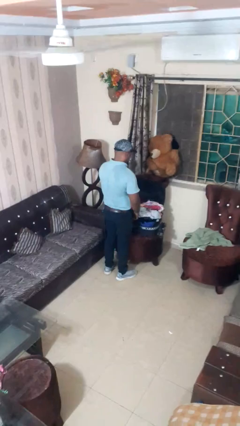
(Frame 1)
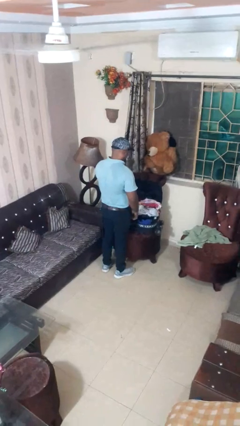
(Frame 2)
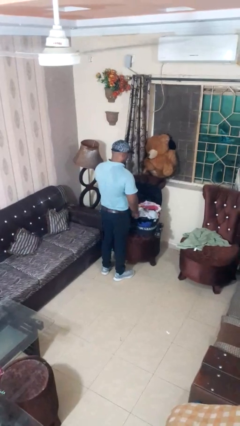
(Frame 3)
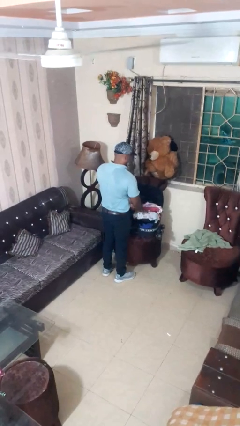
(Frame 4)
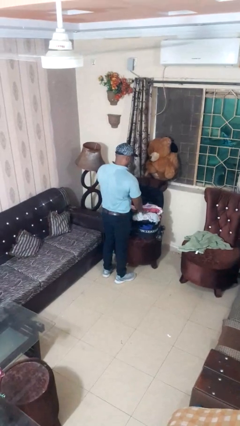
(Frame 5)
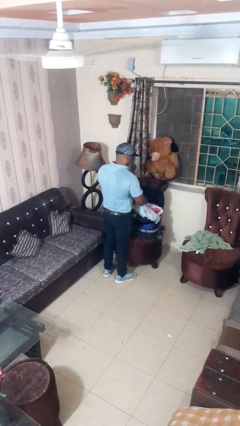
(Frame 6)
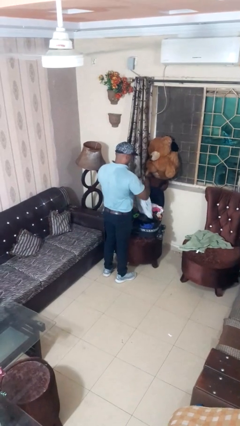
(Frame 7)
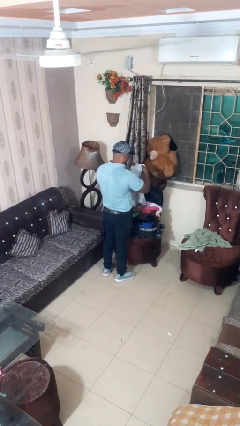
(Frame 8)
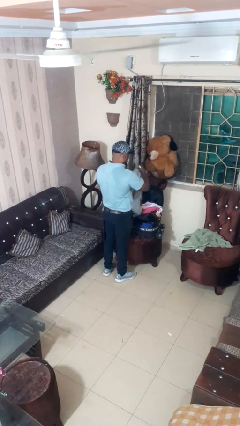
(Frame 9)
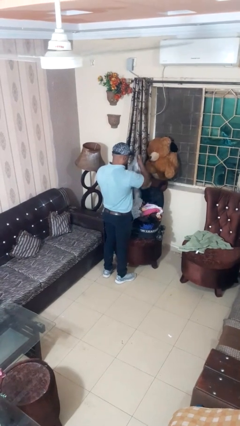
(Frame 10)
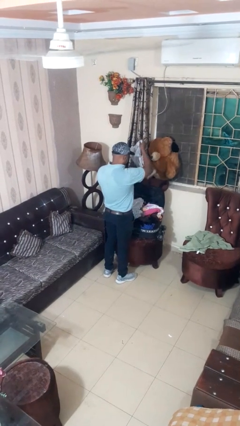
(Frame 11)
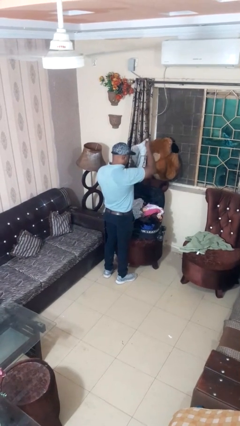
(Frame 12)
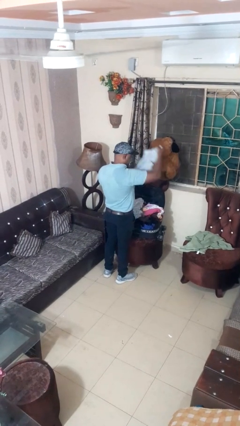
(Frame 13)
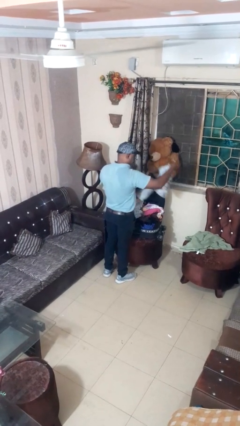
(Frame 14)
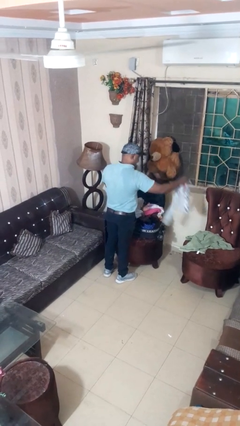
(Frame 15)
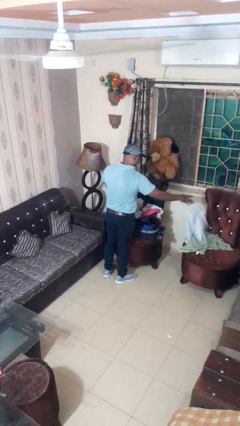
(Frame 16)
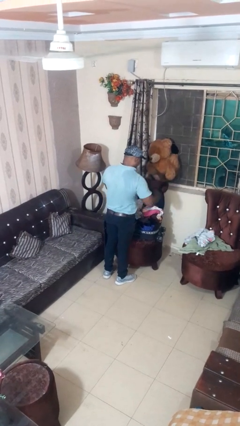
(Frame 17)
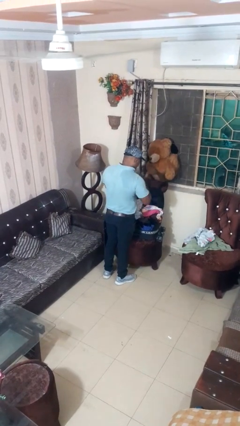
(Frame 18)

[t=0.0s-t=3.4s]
person unloads clothes from suitcase

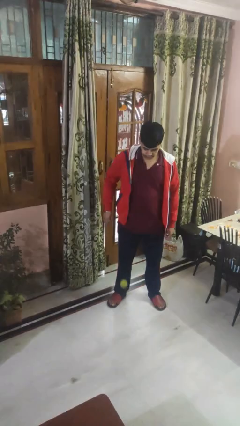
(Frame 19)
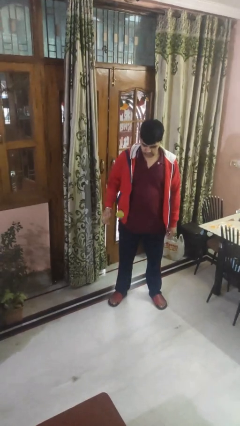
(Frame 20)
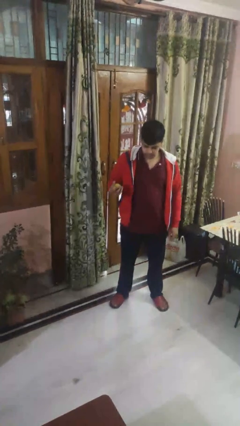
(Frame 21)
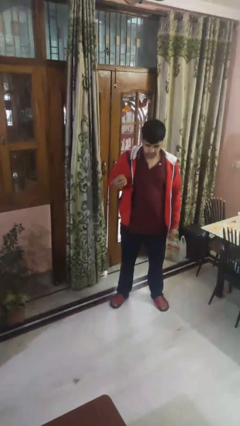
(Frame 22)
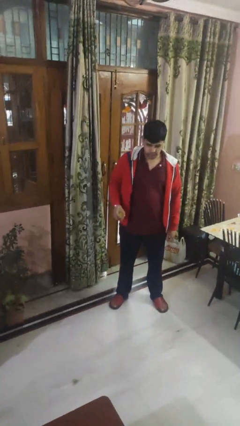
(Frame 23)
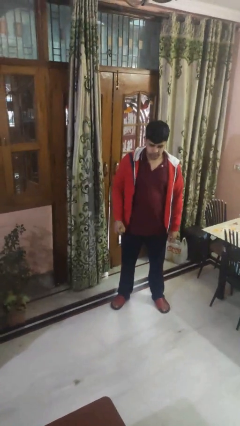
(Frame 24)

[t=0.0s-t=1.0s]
person bounces ball on floor

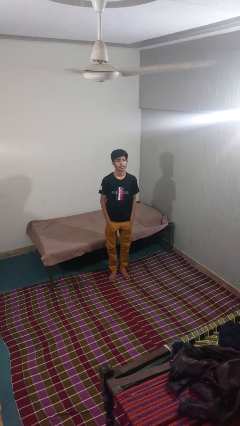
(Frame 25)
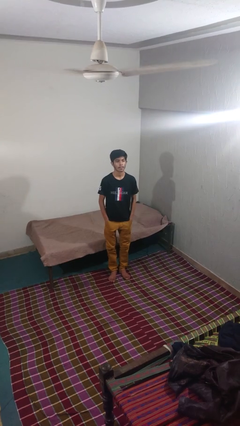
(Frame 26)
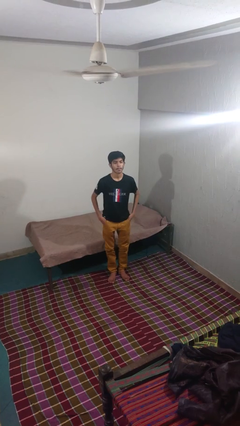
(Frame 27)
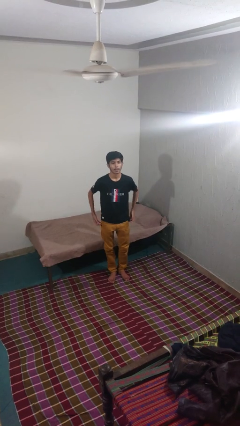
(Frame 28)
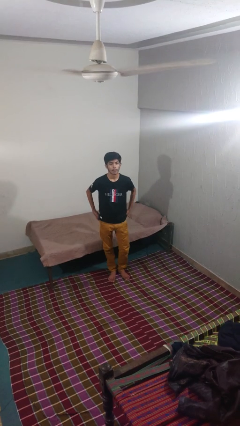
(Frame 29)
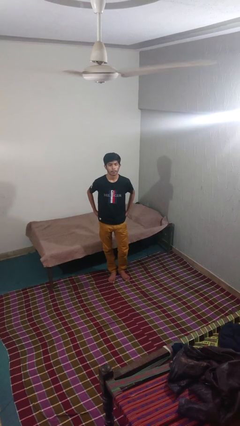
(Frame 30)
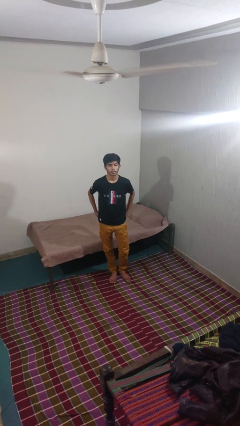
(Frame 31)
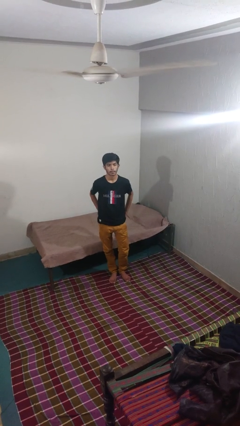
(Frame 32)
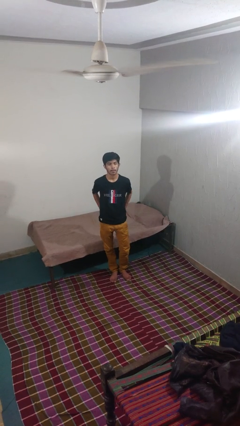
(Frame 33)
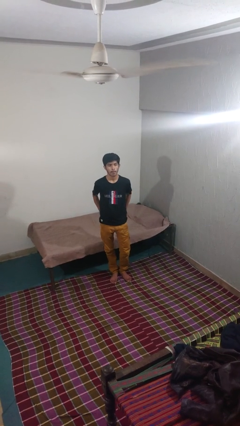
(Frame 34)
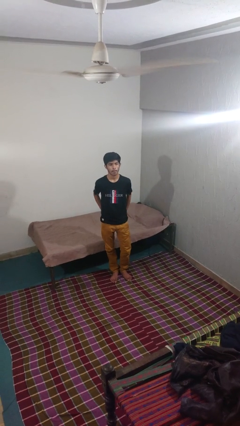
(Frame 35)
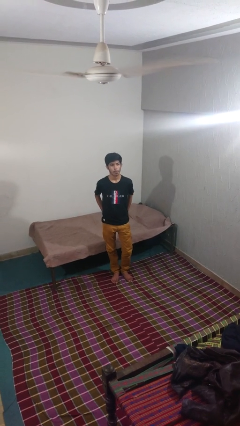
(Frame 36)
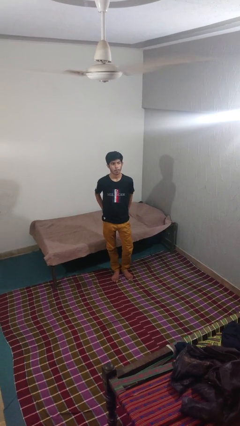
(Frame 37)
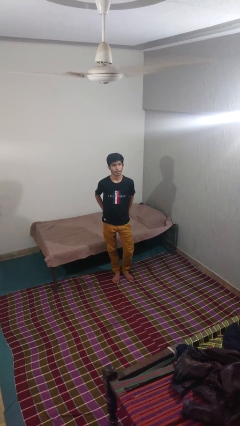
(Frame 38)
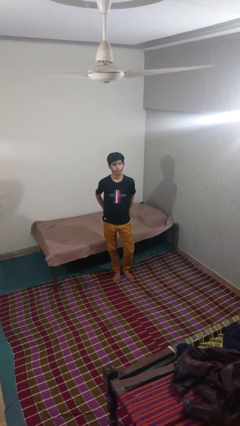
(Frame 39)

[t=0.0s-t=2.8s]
person puts hands in back pockets

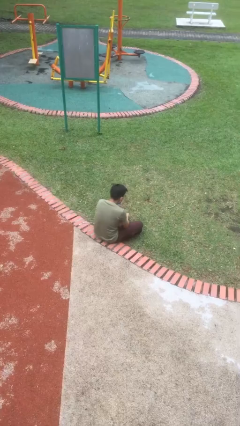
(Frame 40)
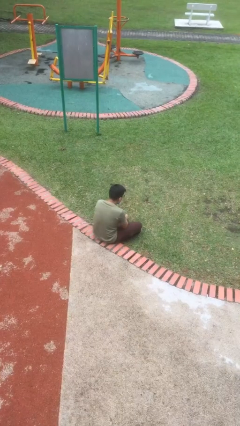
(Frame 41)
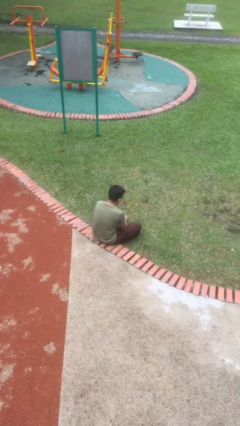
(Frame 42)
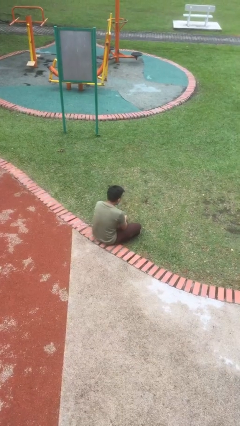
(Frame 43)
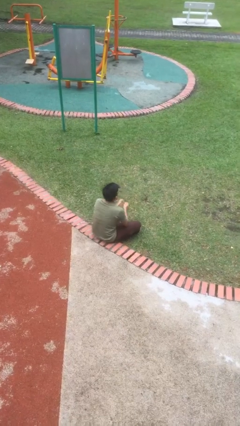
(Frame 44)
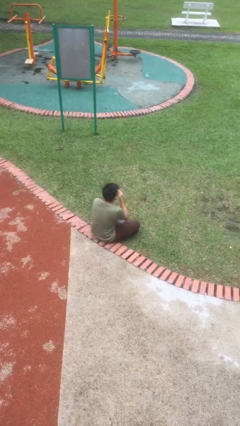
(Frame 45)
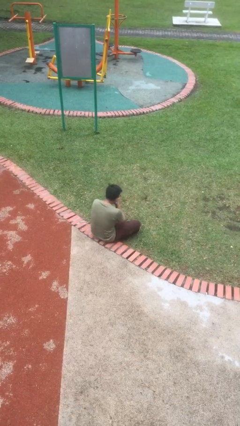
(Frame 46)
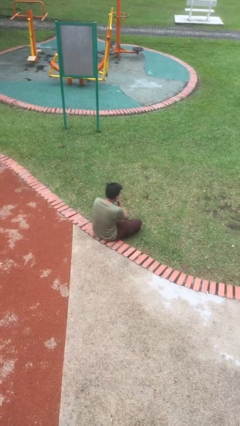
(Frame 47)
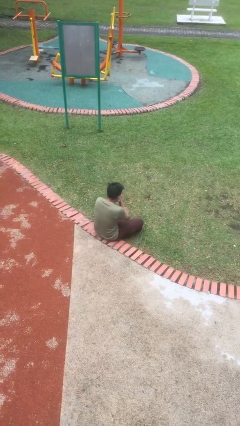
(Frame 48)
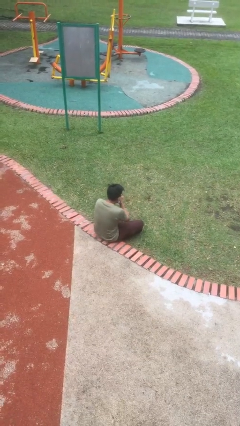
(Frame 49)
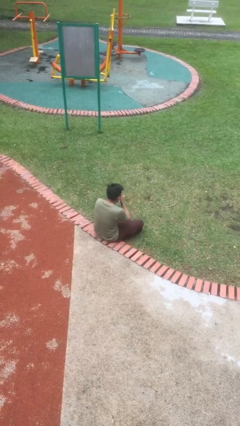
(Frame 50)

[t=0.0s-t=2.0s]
person sneezes into hand

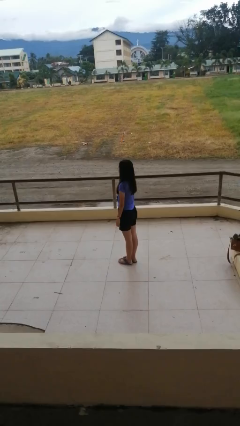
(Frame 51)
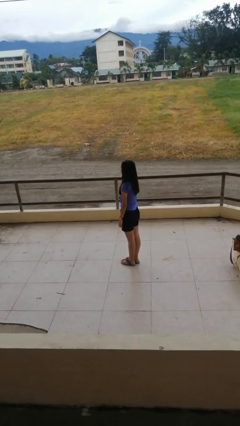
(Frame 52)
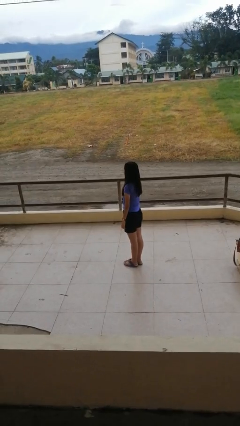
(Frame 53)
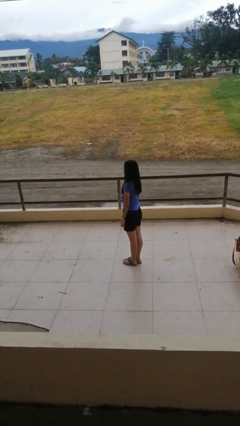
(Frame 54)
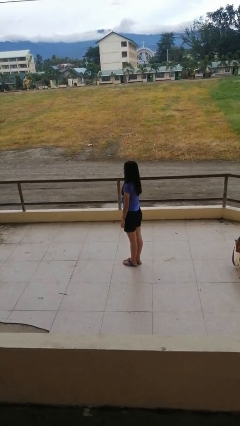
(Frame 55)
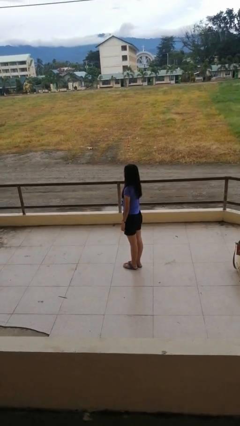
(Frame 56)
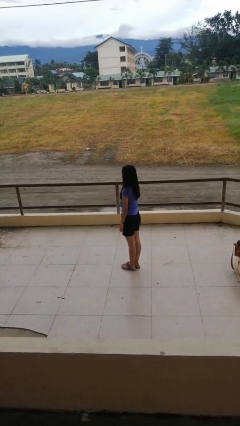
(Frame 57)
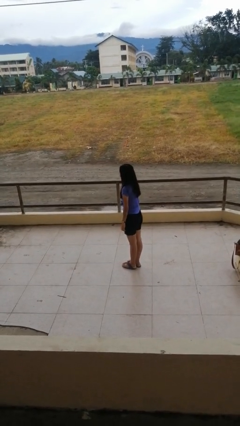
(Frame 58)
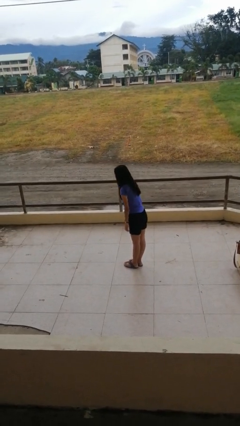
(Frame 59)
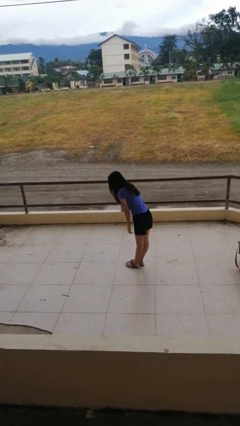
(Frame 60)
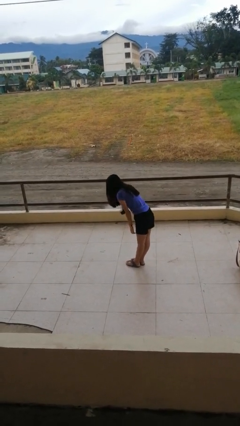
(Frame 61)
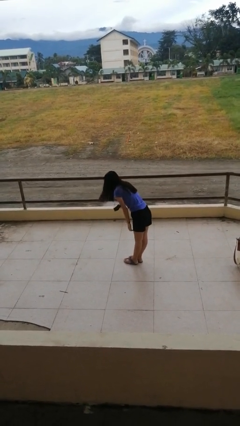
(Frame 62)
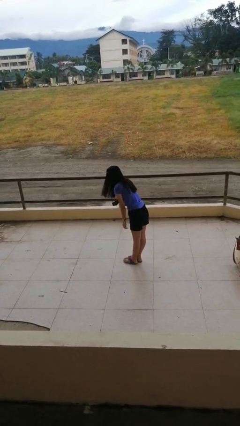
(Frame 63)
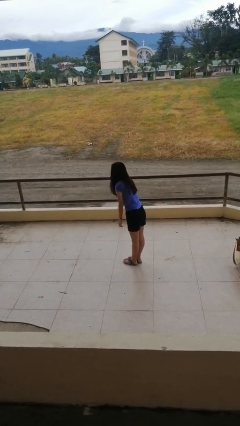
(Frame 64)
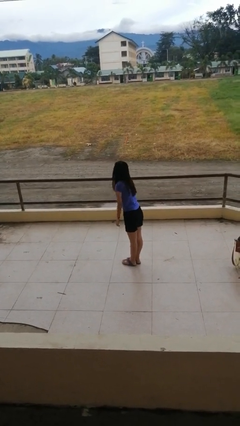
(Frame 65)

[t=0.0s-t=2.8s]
person bows

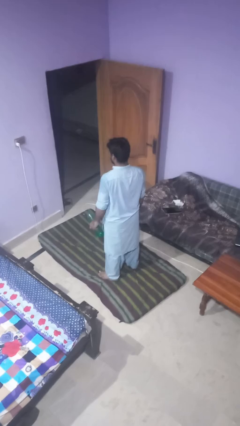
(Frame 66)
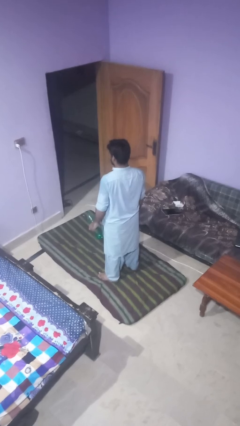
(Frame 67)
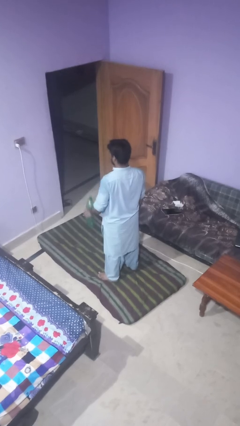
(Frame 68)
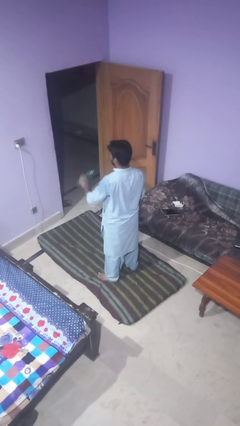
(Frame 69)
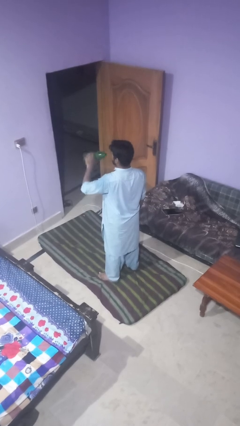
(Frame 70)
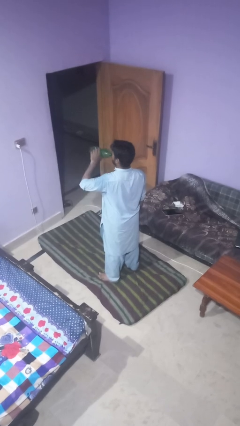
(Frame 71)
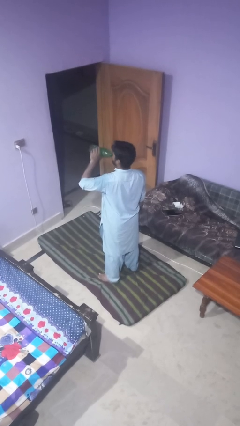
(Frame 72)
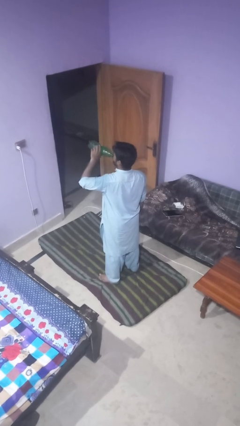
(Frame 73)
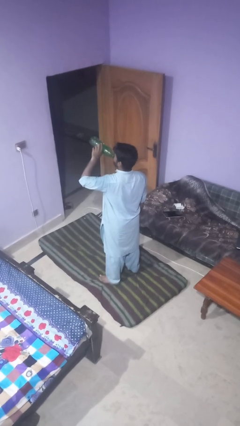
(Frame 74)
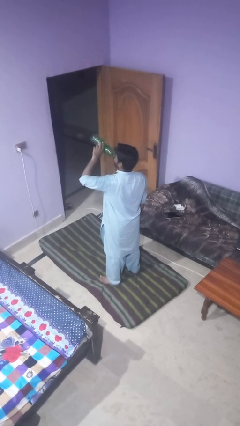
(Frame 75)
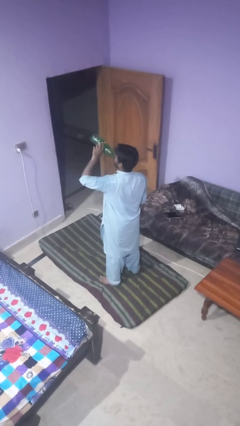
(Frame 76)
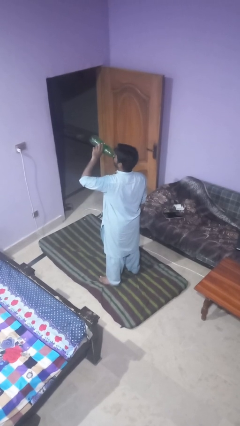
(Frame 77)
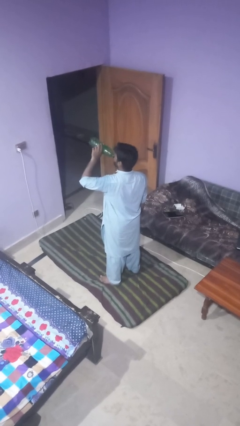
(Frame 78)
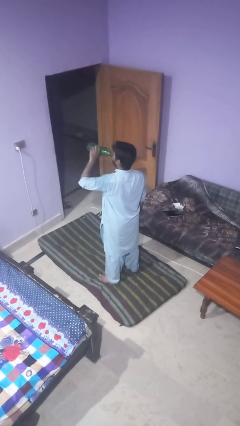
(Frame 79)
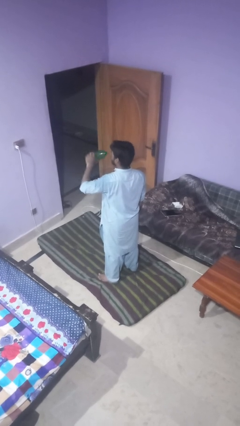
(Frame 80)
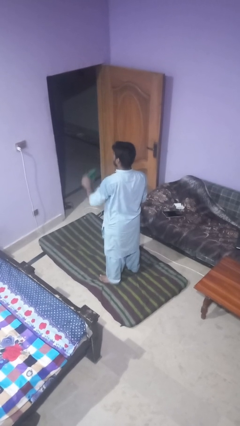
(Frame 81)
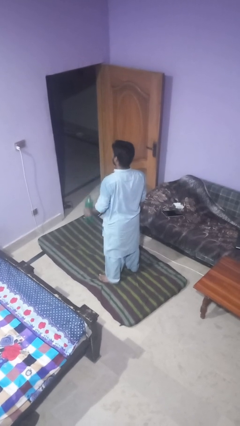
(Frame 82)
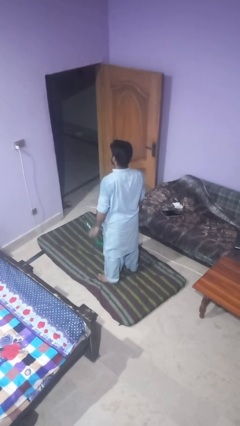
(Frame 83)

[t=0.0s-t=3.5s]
person drinks from bottle

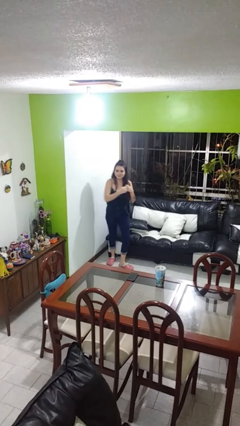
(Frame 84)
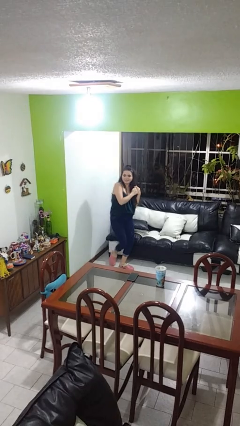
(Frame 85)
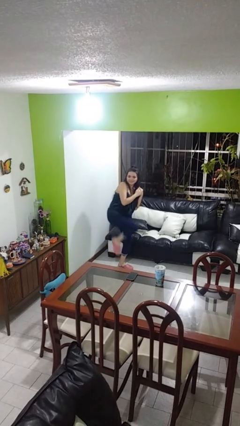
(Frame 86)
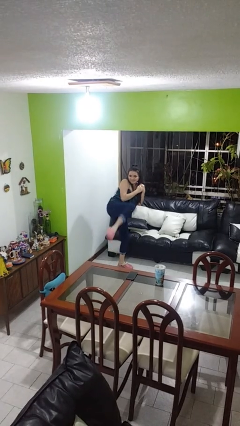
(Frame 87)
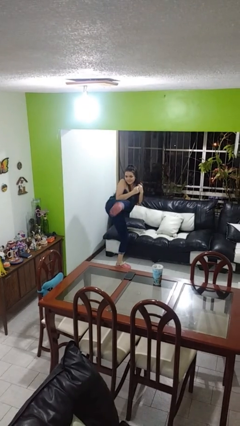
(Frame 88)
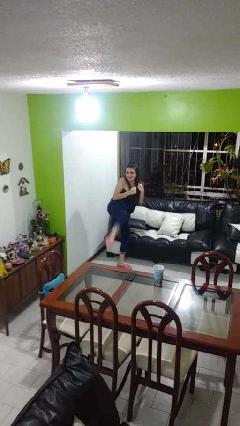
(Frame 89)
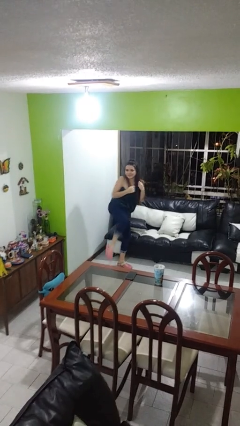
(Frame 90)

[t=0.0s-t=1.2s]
person karate kicks
